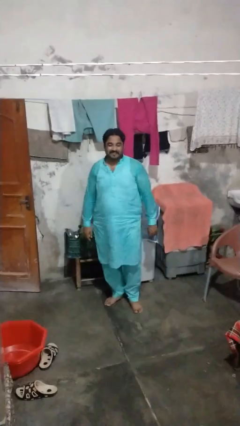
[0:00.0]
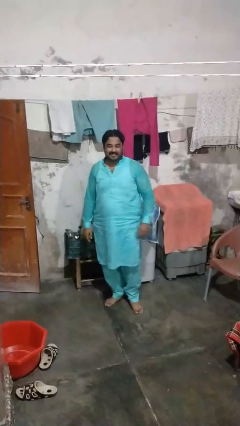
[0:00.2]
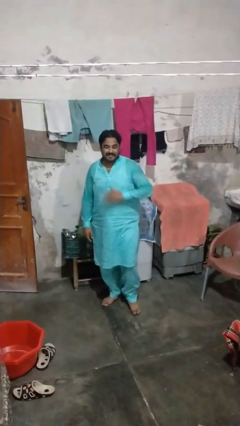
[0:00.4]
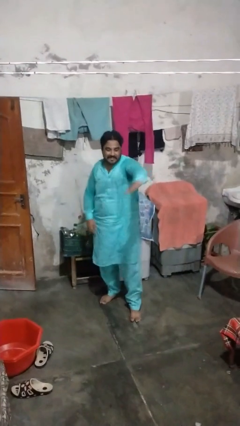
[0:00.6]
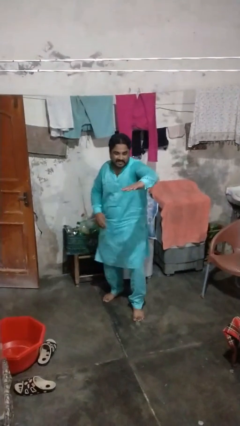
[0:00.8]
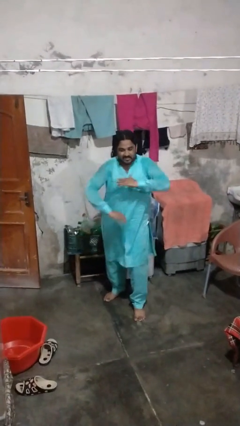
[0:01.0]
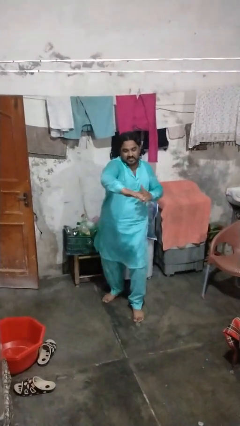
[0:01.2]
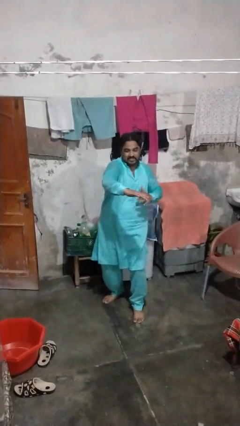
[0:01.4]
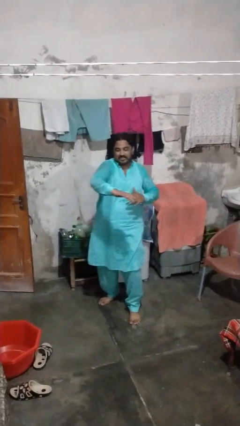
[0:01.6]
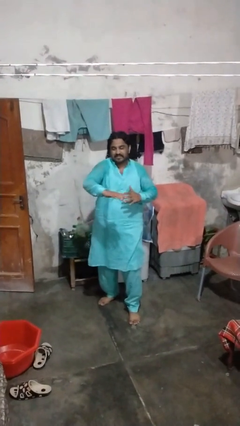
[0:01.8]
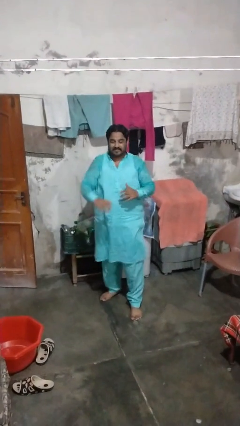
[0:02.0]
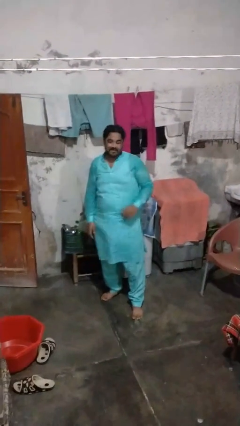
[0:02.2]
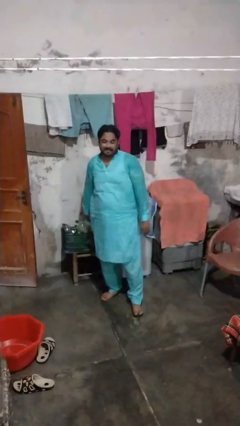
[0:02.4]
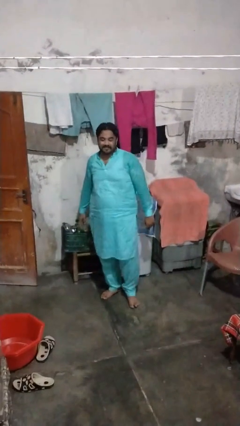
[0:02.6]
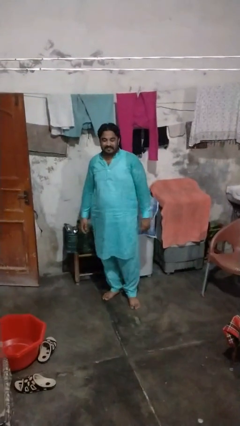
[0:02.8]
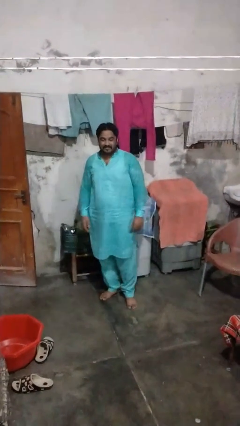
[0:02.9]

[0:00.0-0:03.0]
person karate chop

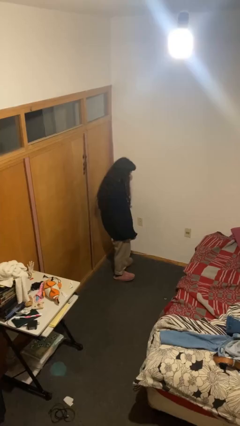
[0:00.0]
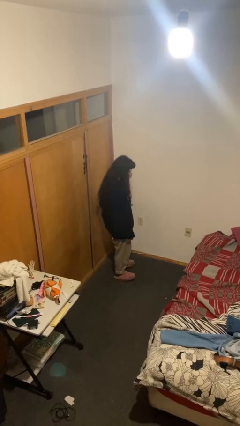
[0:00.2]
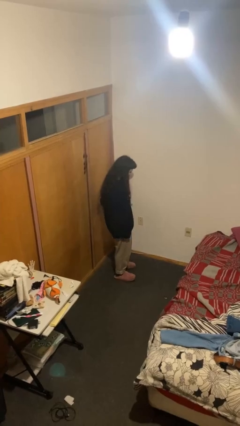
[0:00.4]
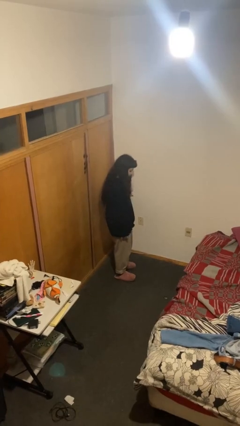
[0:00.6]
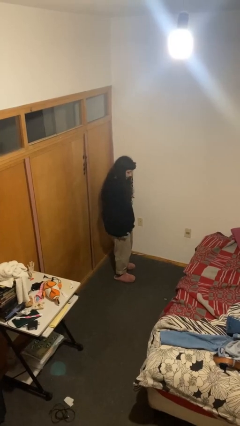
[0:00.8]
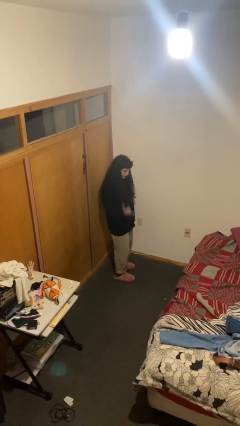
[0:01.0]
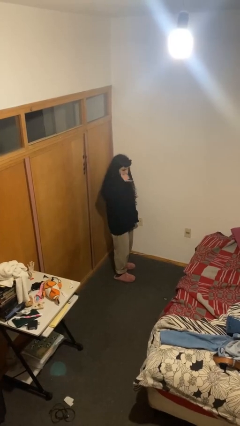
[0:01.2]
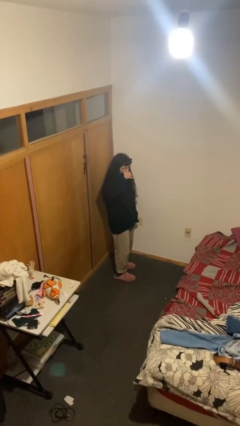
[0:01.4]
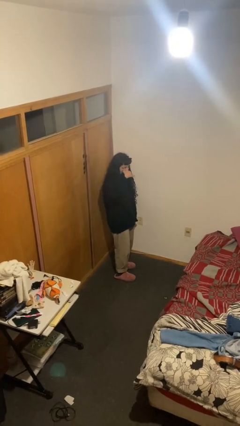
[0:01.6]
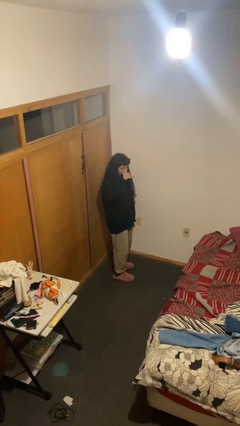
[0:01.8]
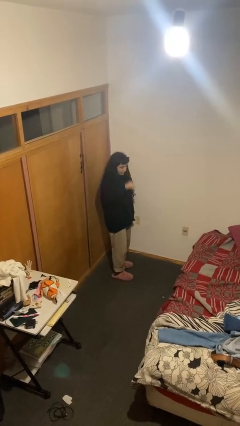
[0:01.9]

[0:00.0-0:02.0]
person gestures hang loose

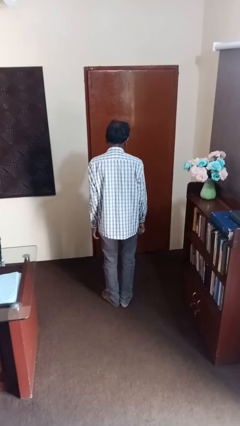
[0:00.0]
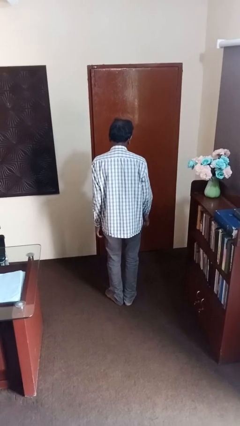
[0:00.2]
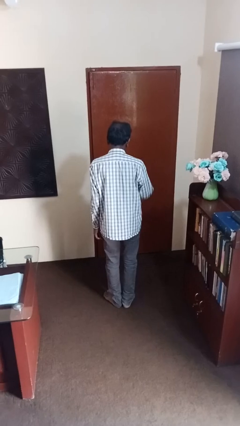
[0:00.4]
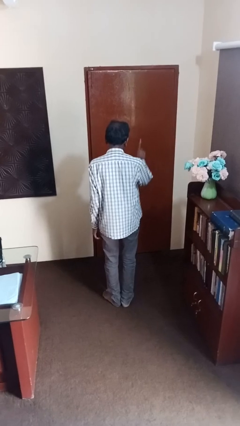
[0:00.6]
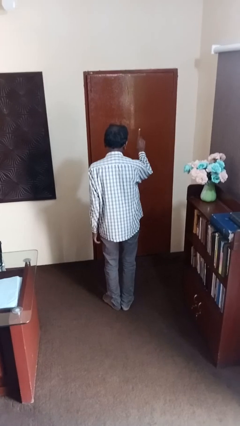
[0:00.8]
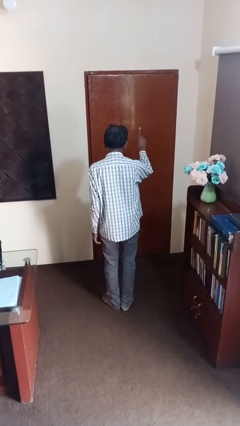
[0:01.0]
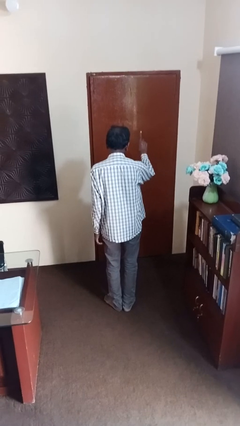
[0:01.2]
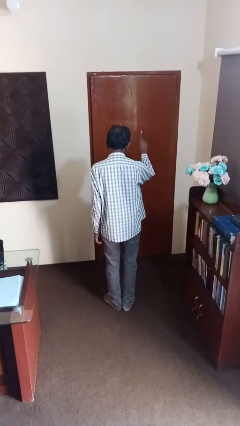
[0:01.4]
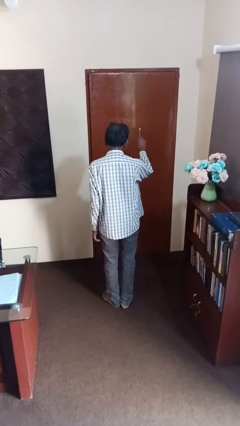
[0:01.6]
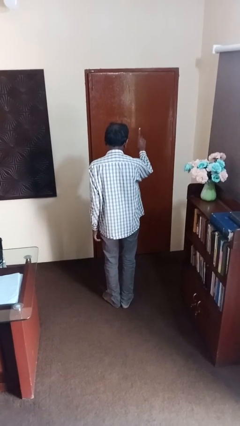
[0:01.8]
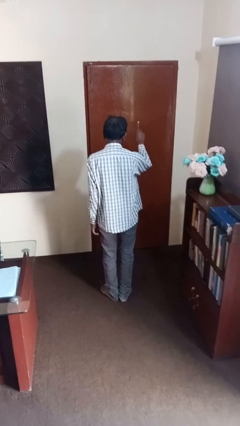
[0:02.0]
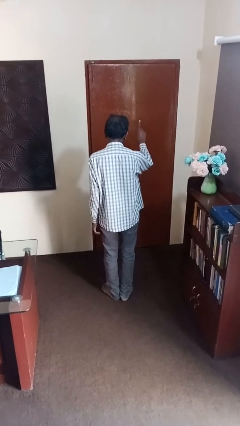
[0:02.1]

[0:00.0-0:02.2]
person gestures number one

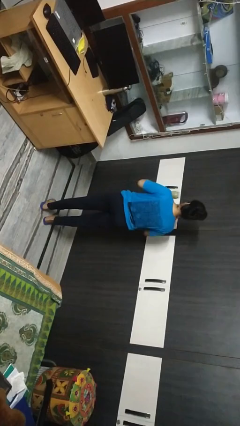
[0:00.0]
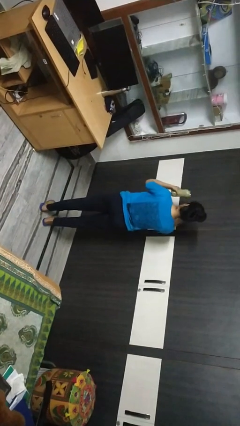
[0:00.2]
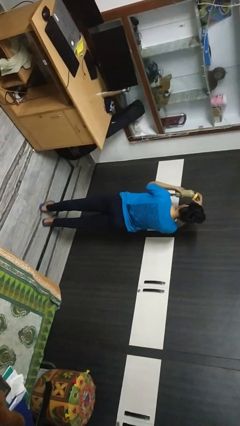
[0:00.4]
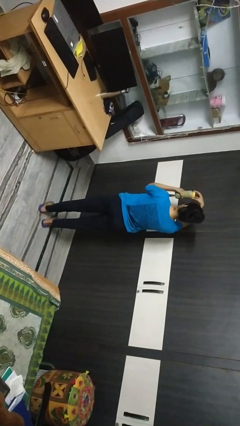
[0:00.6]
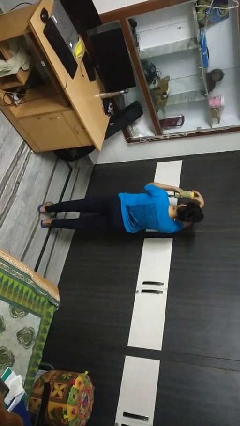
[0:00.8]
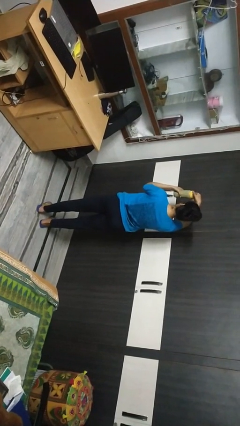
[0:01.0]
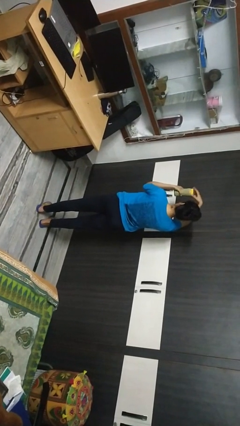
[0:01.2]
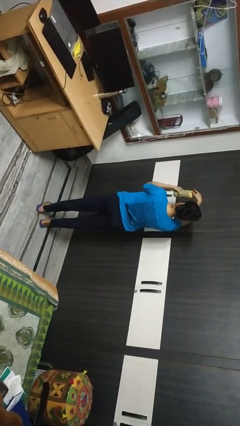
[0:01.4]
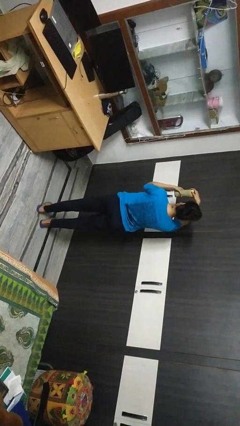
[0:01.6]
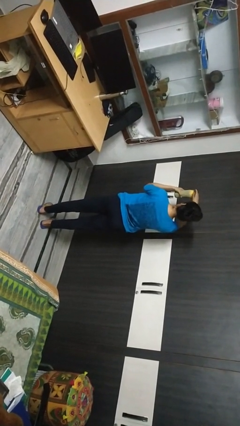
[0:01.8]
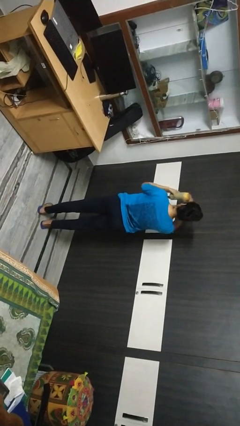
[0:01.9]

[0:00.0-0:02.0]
person closes jar

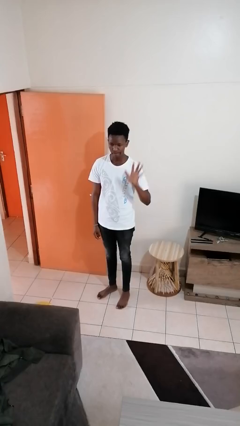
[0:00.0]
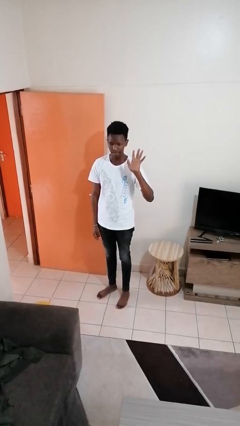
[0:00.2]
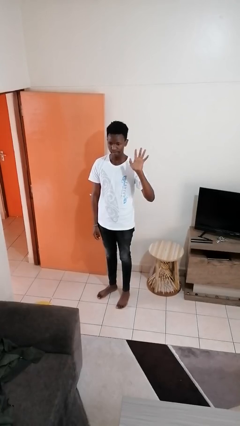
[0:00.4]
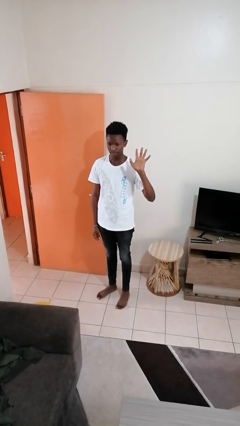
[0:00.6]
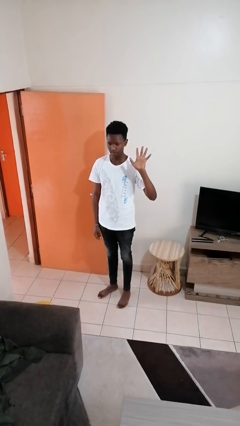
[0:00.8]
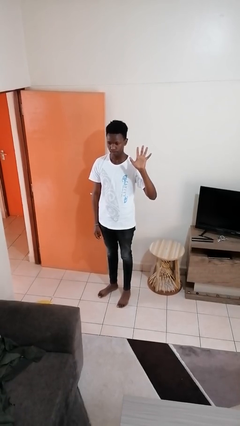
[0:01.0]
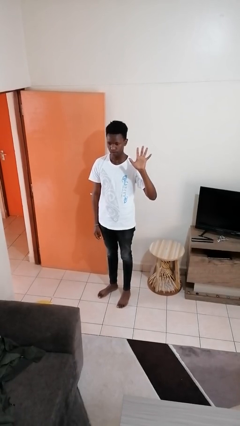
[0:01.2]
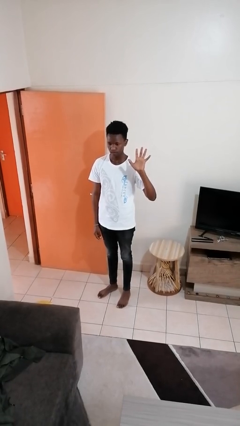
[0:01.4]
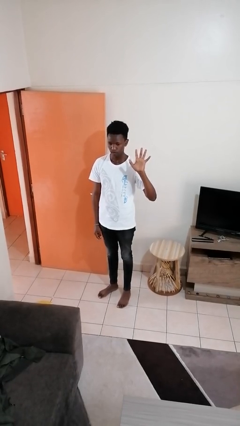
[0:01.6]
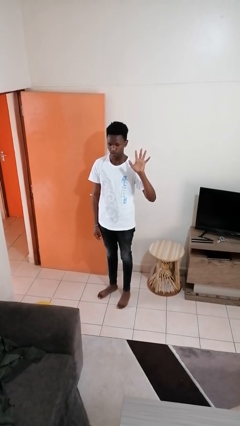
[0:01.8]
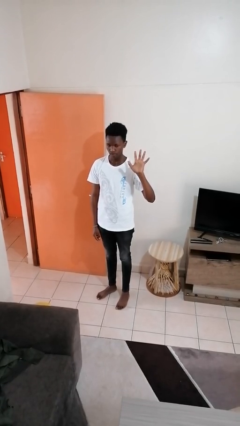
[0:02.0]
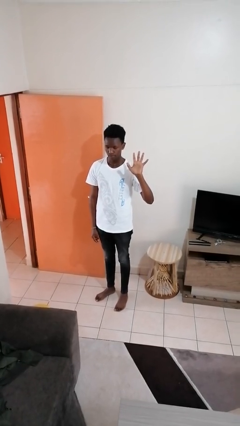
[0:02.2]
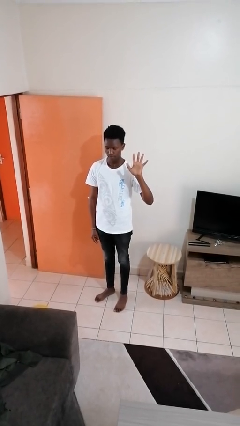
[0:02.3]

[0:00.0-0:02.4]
person gestures number five

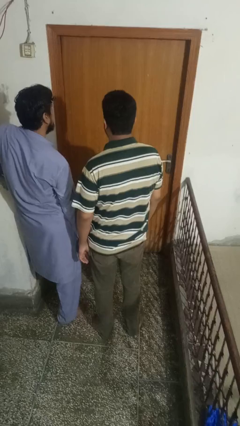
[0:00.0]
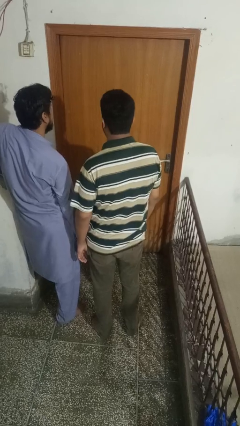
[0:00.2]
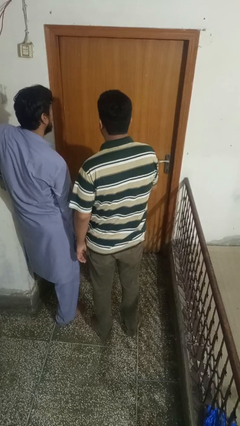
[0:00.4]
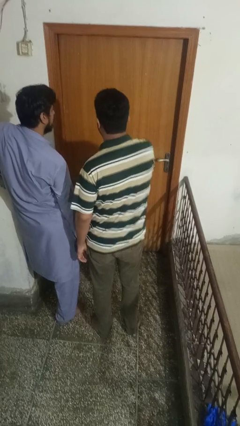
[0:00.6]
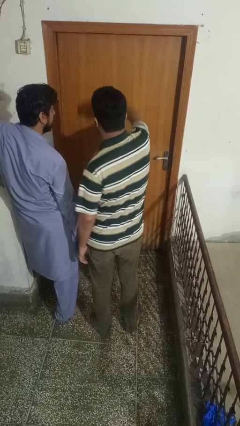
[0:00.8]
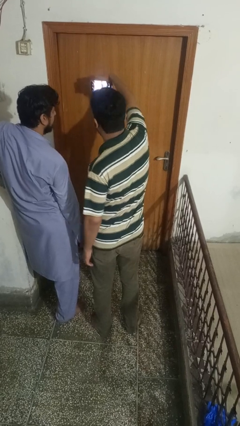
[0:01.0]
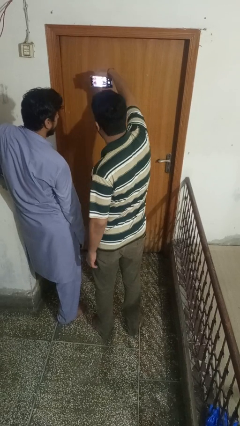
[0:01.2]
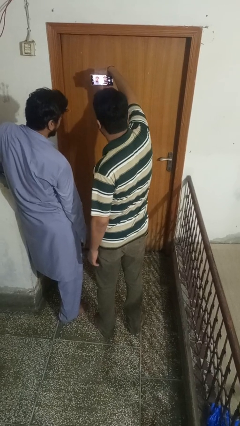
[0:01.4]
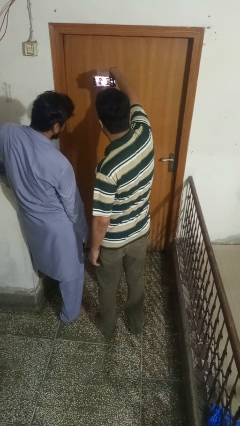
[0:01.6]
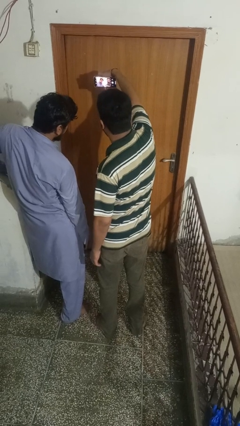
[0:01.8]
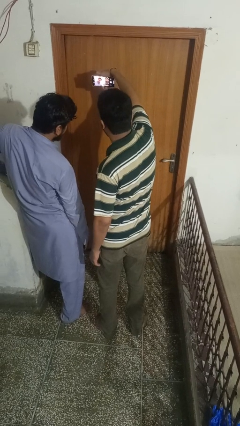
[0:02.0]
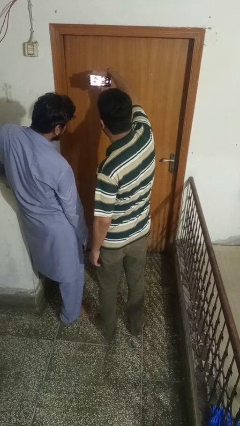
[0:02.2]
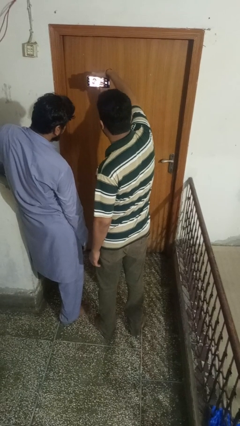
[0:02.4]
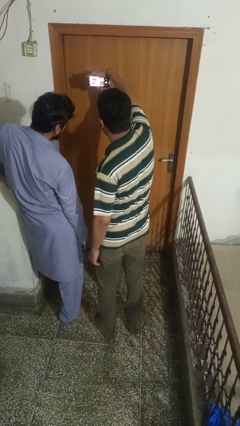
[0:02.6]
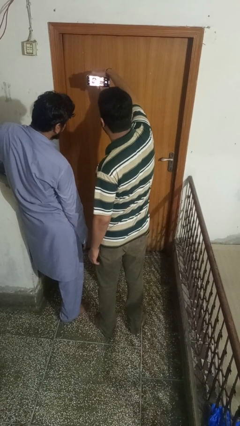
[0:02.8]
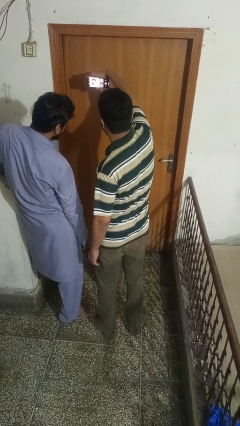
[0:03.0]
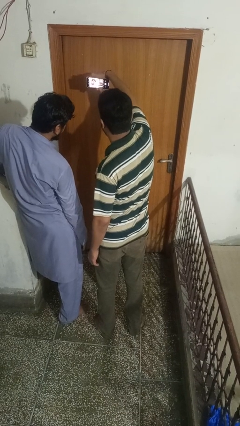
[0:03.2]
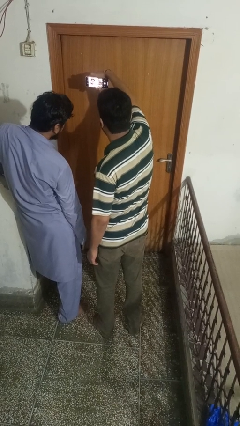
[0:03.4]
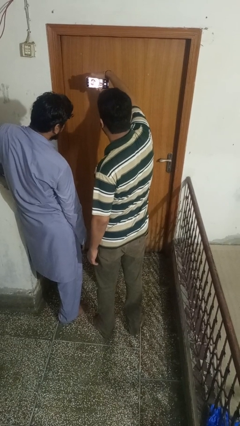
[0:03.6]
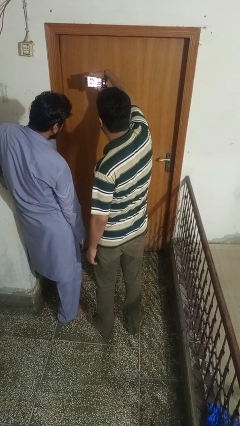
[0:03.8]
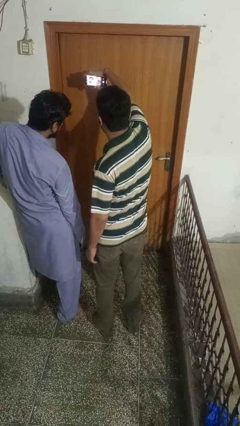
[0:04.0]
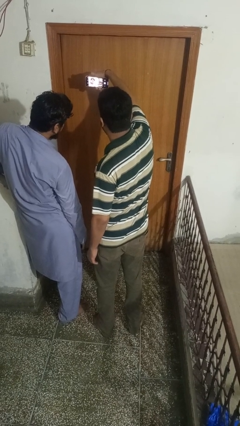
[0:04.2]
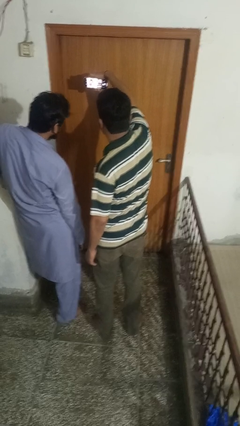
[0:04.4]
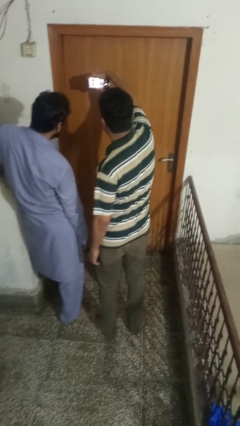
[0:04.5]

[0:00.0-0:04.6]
person takes selfie with person

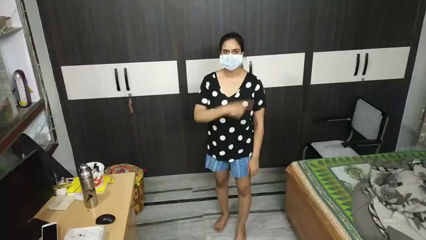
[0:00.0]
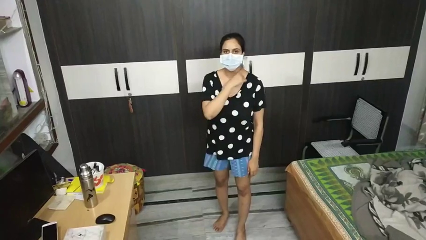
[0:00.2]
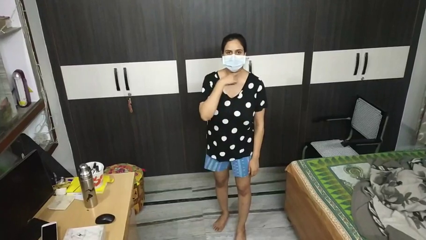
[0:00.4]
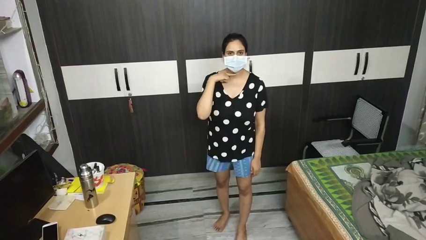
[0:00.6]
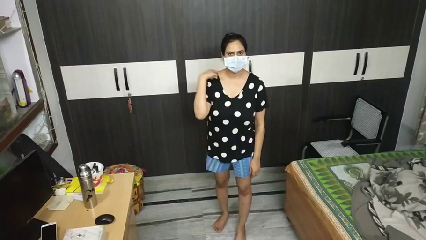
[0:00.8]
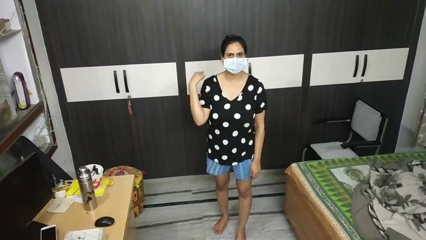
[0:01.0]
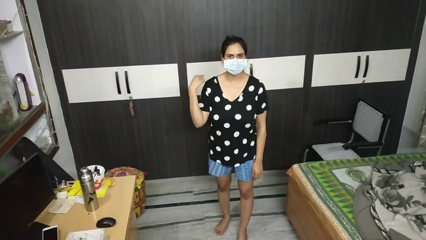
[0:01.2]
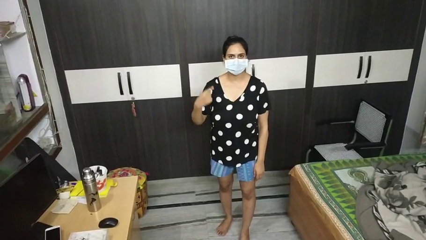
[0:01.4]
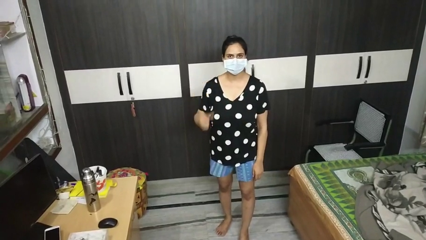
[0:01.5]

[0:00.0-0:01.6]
person gestures cut
